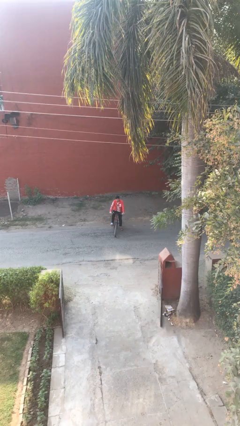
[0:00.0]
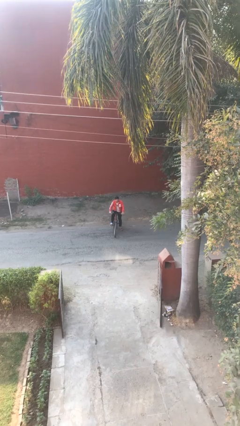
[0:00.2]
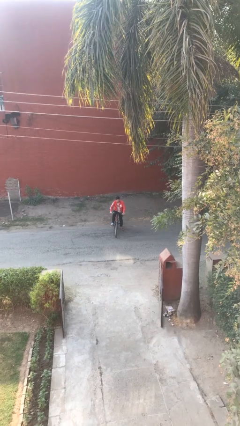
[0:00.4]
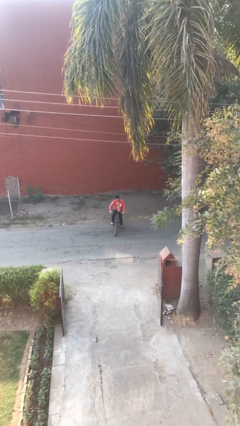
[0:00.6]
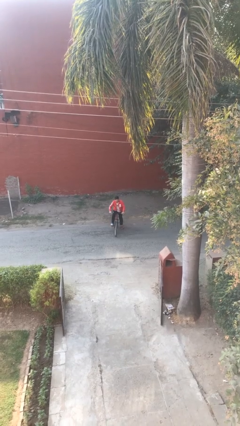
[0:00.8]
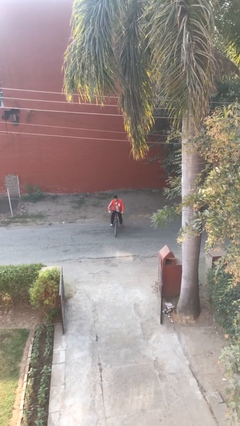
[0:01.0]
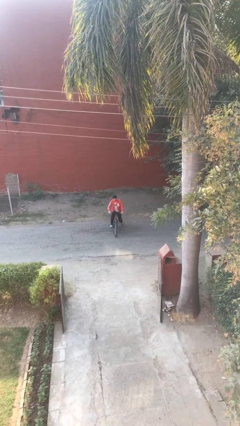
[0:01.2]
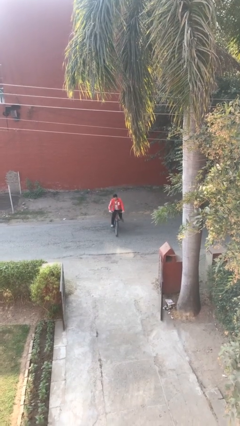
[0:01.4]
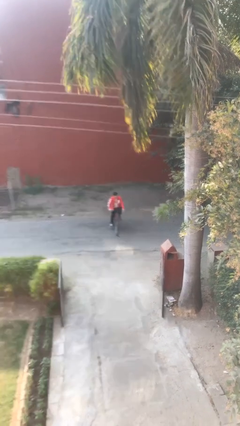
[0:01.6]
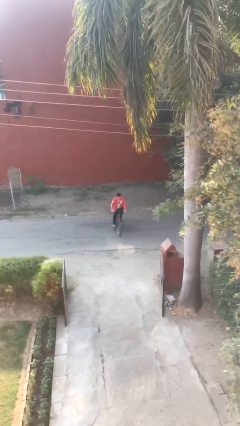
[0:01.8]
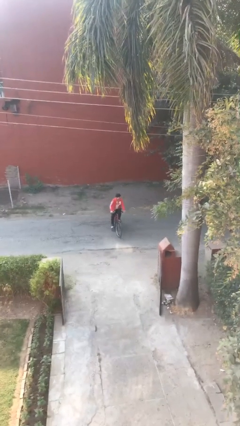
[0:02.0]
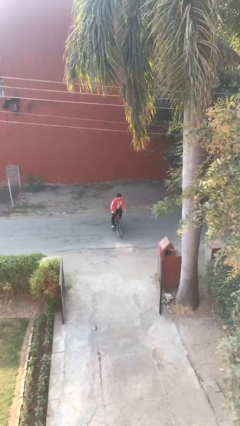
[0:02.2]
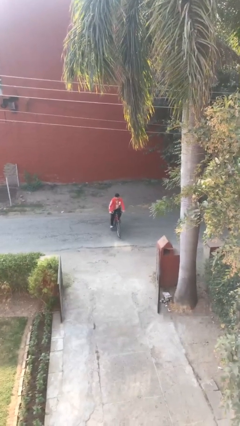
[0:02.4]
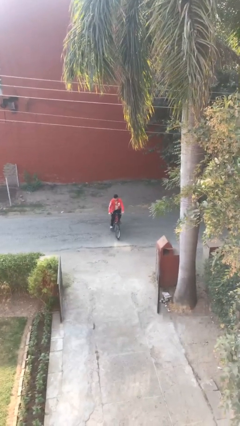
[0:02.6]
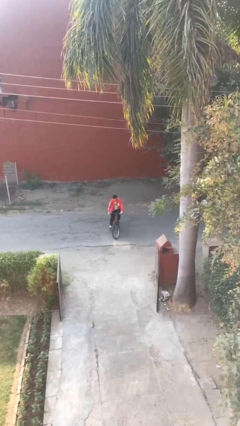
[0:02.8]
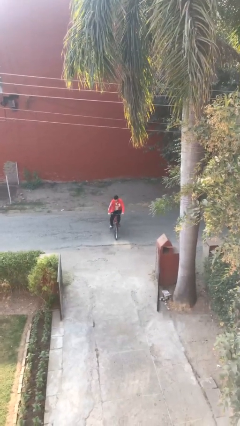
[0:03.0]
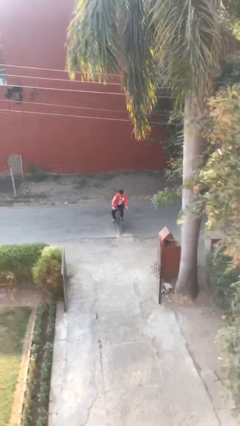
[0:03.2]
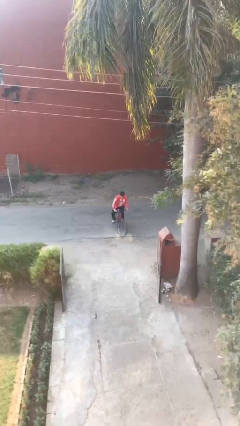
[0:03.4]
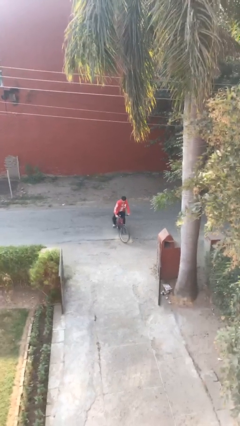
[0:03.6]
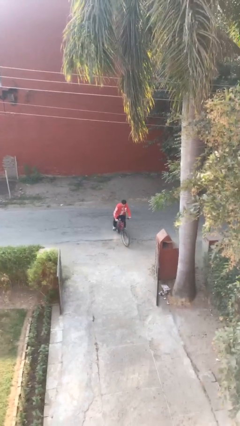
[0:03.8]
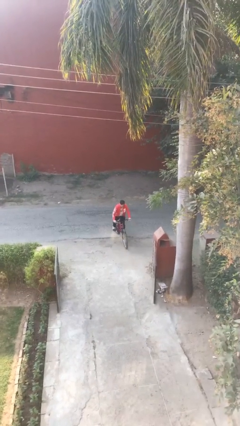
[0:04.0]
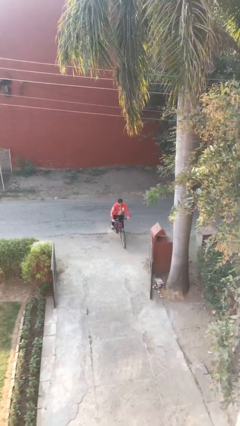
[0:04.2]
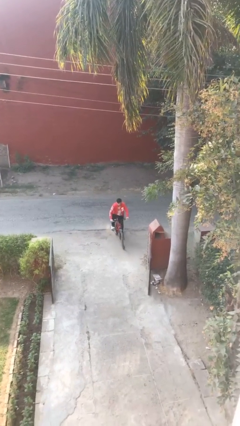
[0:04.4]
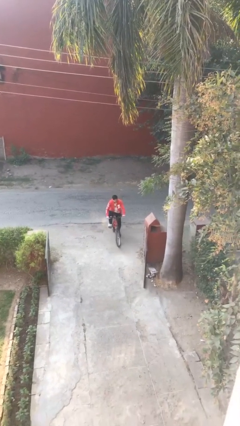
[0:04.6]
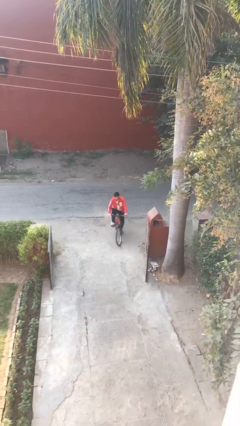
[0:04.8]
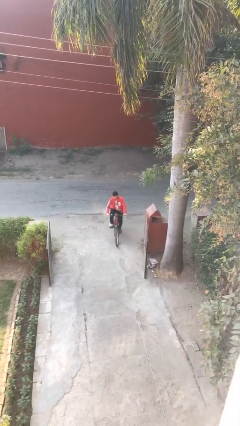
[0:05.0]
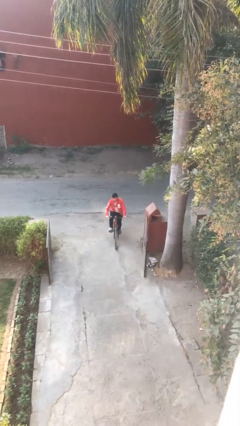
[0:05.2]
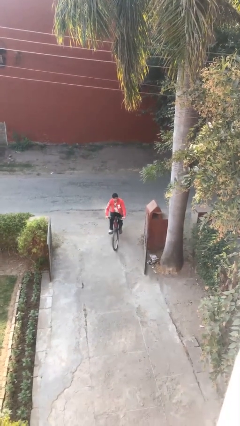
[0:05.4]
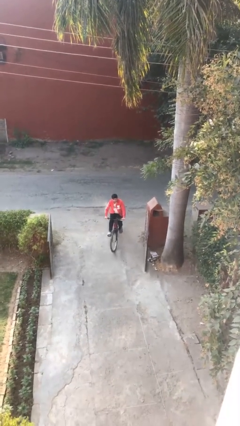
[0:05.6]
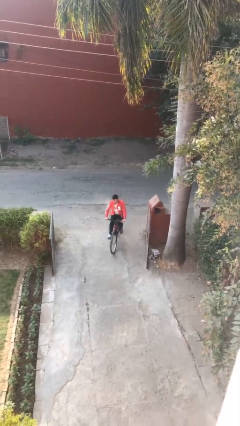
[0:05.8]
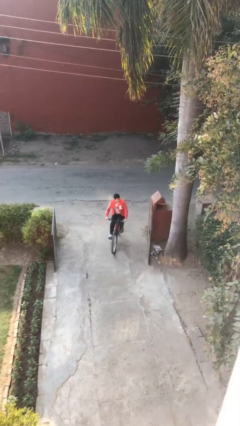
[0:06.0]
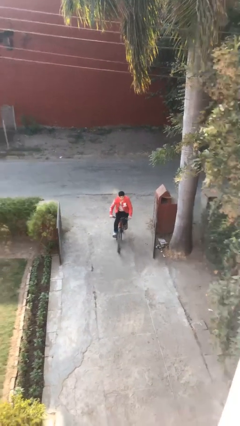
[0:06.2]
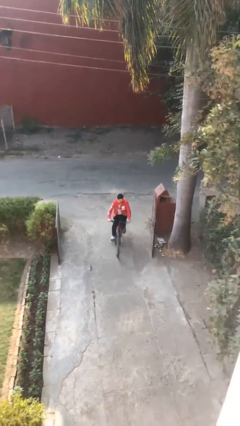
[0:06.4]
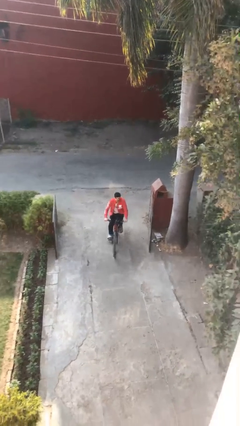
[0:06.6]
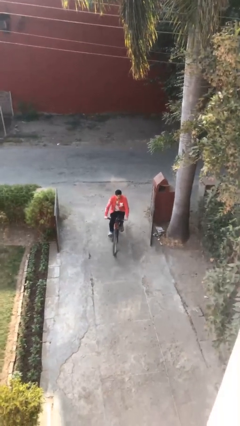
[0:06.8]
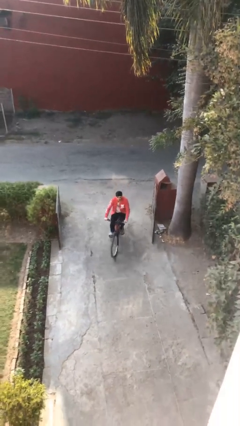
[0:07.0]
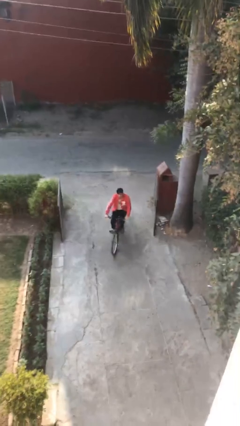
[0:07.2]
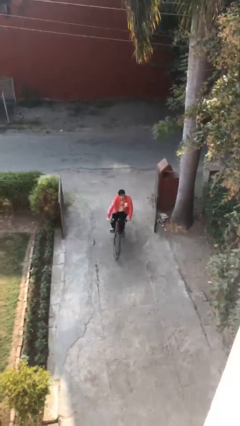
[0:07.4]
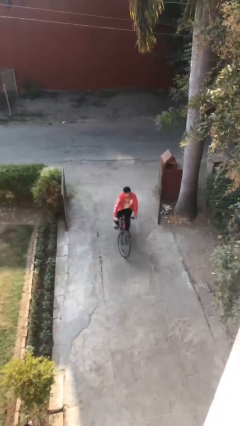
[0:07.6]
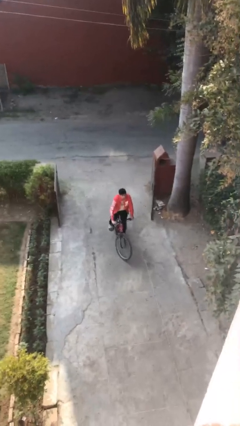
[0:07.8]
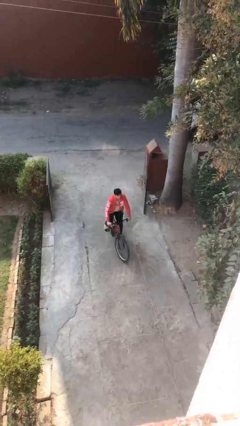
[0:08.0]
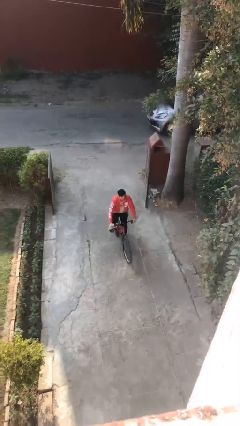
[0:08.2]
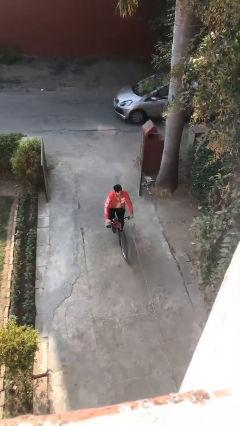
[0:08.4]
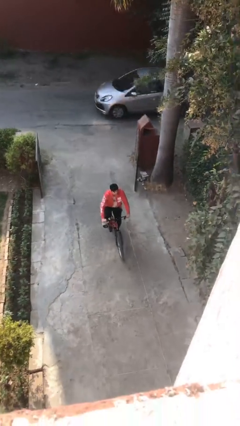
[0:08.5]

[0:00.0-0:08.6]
person rides bicycle

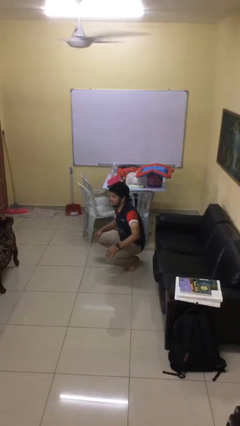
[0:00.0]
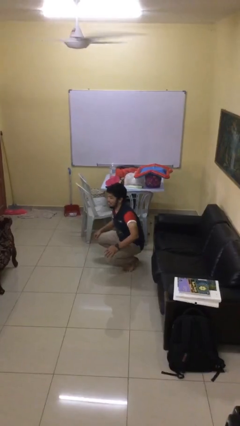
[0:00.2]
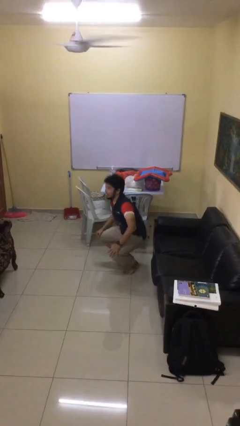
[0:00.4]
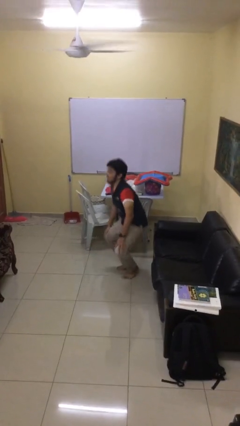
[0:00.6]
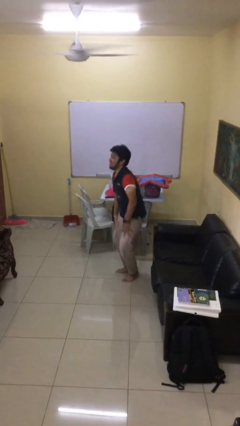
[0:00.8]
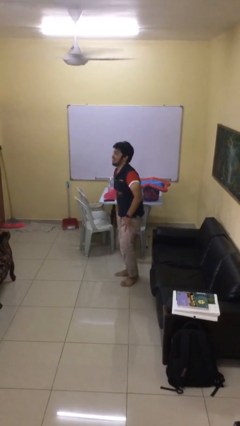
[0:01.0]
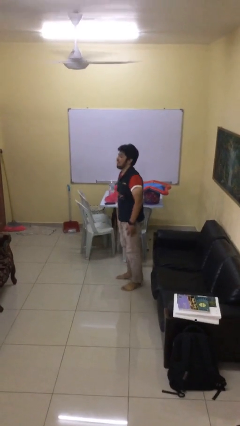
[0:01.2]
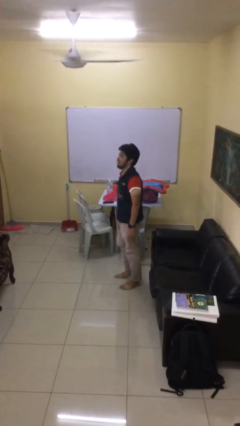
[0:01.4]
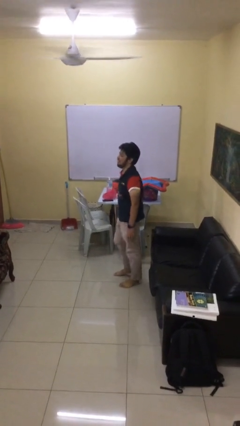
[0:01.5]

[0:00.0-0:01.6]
person stands up

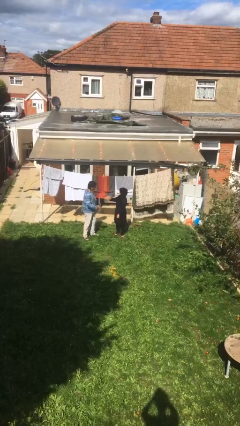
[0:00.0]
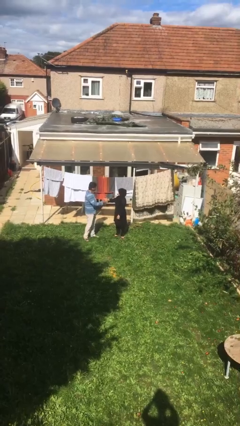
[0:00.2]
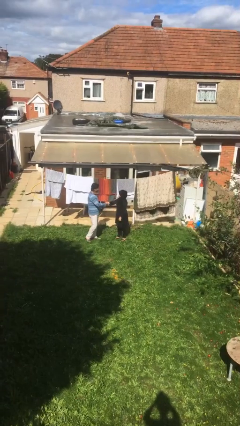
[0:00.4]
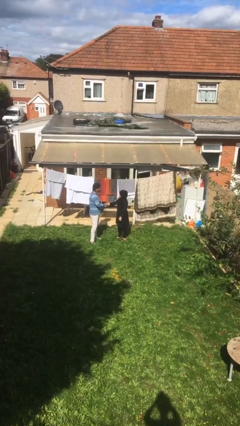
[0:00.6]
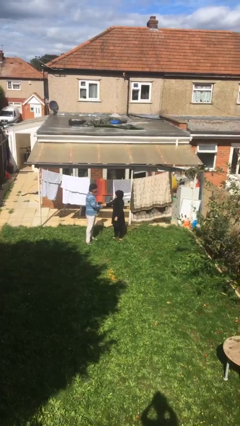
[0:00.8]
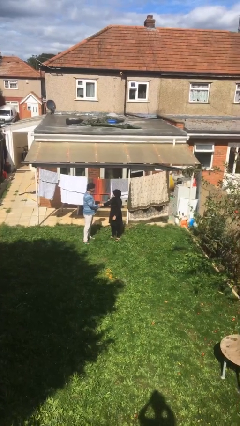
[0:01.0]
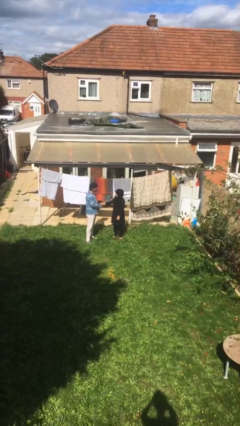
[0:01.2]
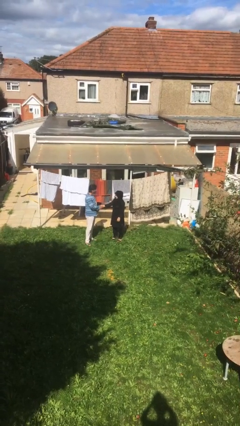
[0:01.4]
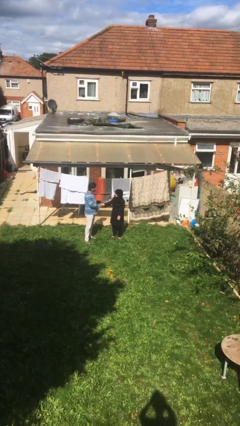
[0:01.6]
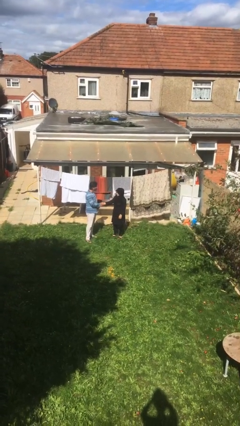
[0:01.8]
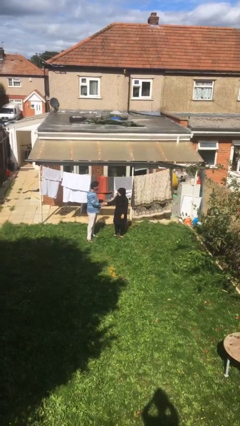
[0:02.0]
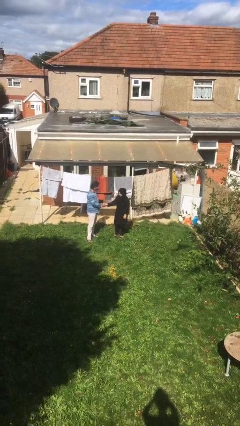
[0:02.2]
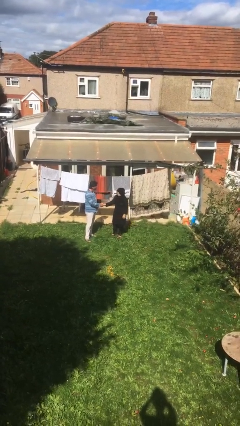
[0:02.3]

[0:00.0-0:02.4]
person shakes hand

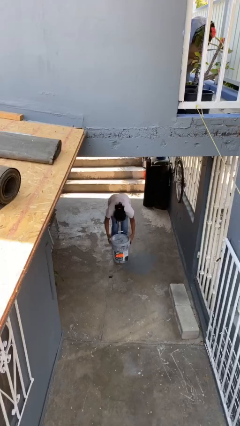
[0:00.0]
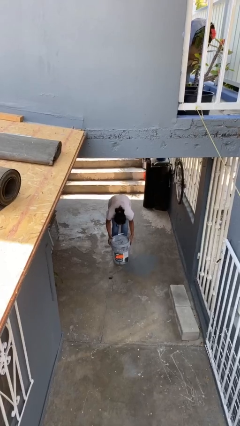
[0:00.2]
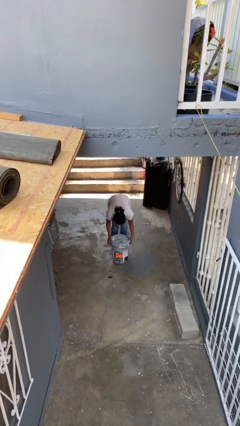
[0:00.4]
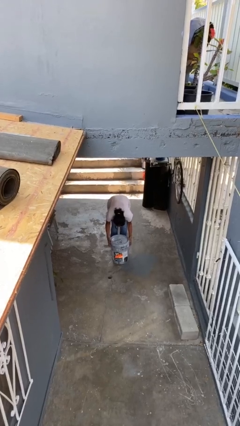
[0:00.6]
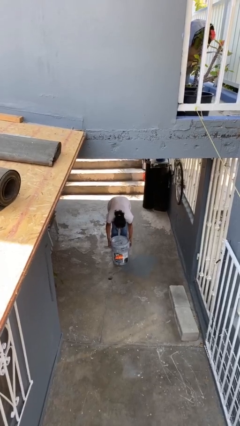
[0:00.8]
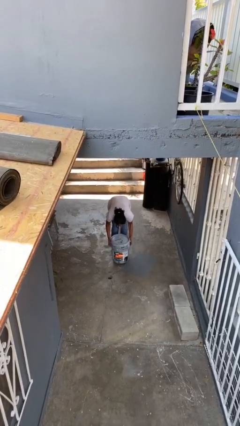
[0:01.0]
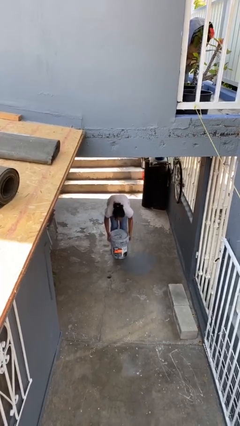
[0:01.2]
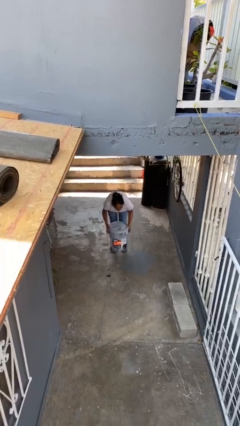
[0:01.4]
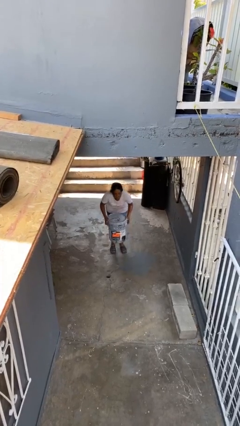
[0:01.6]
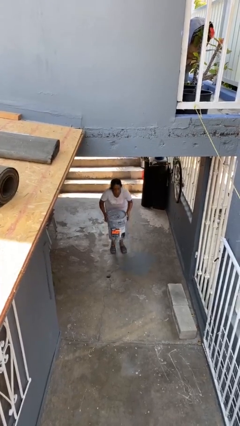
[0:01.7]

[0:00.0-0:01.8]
person picks up object from floor

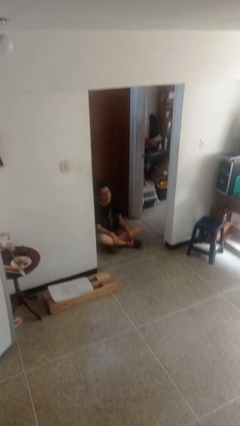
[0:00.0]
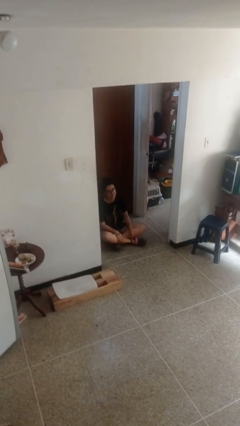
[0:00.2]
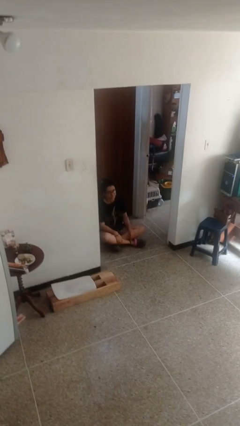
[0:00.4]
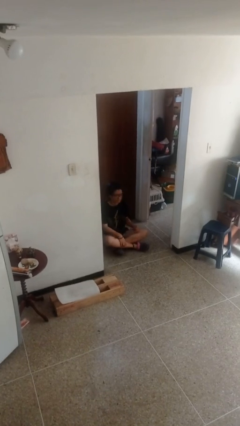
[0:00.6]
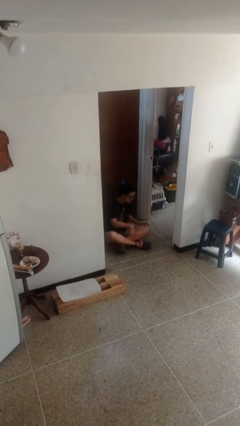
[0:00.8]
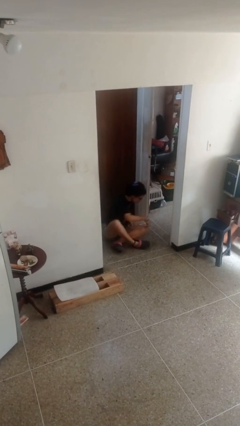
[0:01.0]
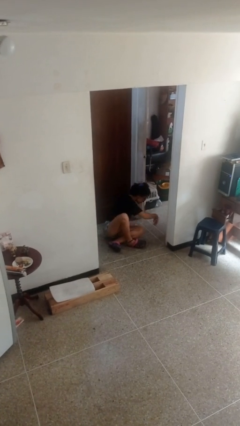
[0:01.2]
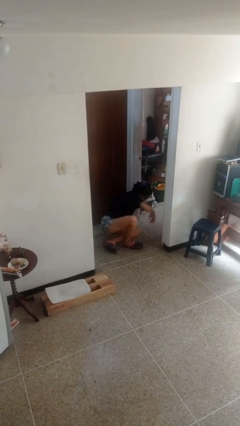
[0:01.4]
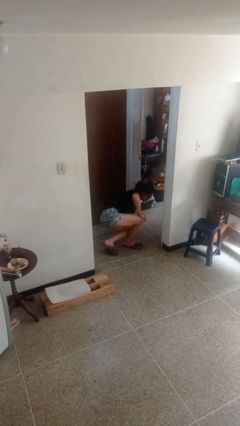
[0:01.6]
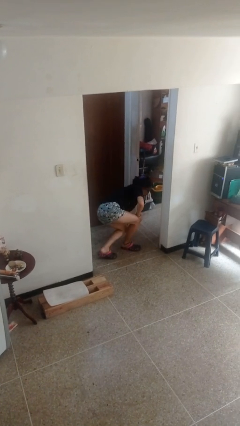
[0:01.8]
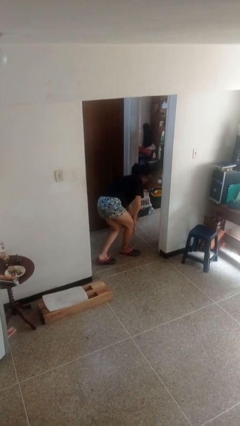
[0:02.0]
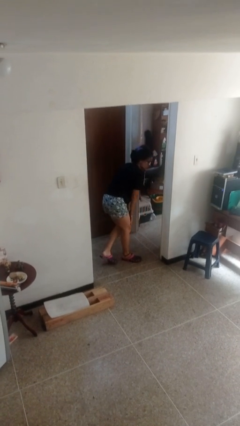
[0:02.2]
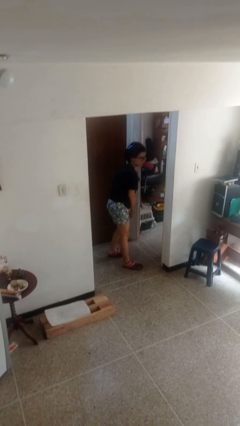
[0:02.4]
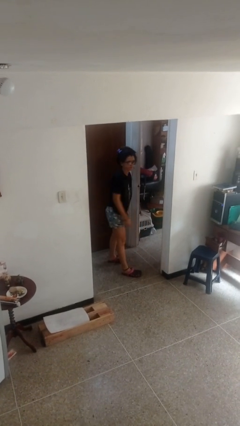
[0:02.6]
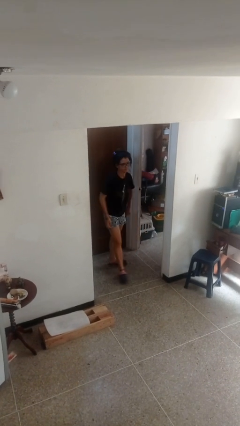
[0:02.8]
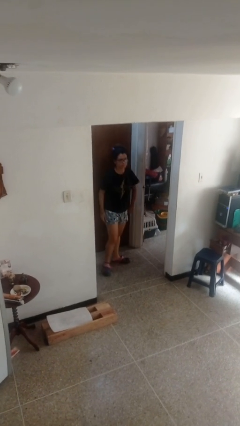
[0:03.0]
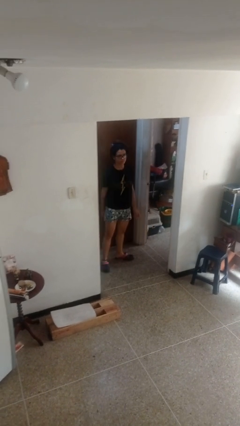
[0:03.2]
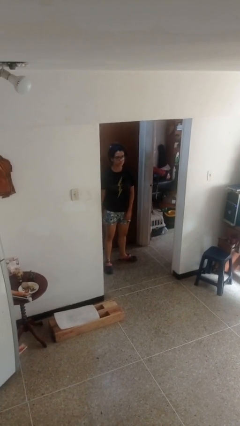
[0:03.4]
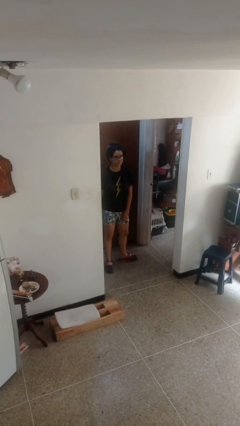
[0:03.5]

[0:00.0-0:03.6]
person stands up from floor
